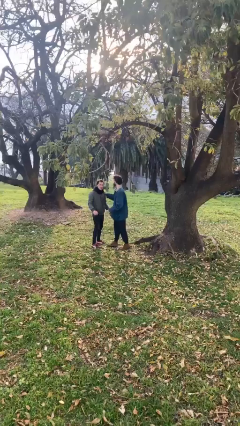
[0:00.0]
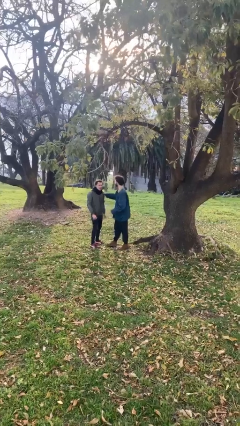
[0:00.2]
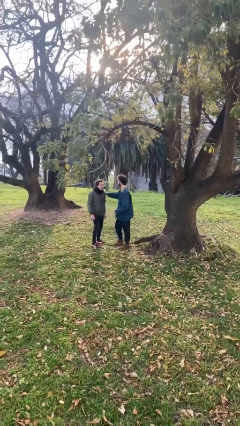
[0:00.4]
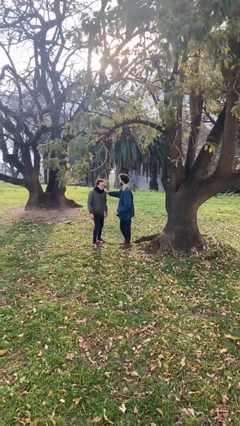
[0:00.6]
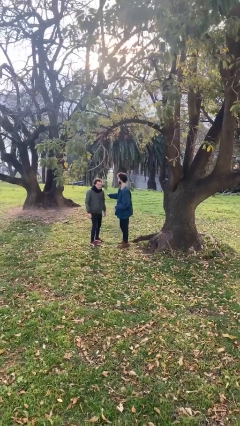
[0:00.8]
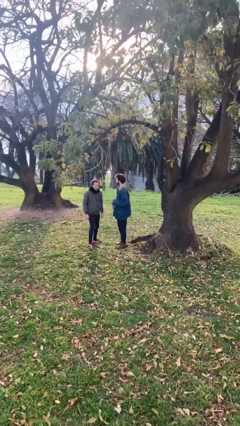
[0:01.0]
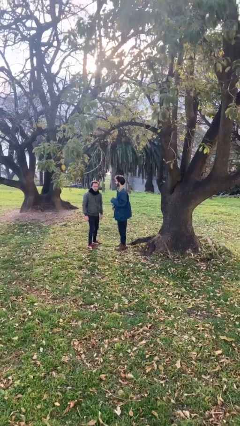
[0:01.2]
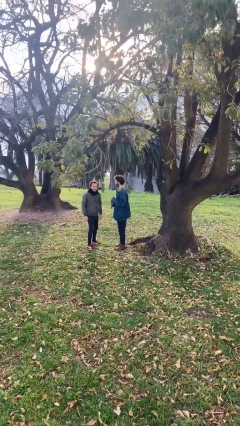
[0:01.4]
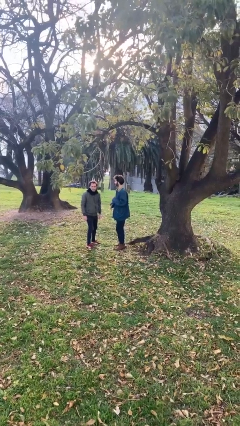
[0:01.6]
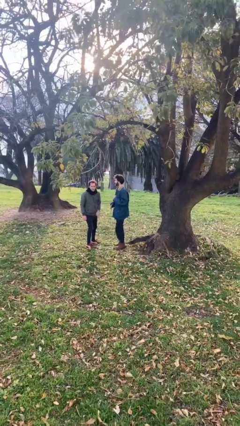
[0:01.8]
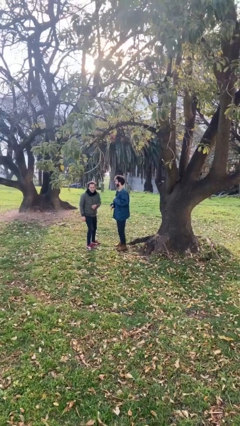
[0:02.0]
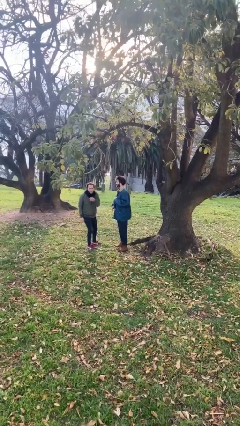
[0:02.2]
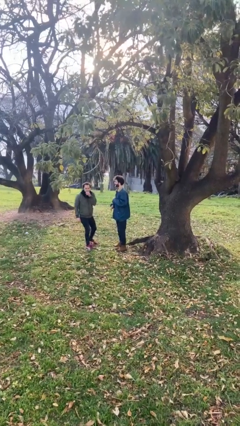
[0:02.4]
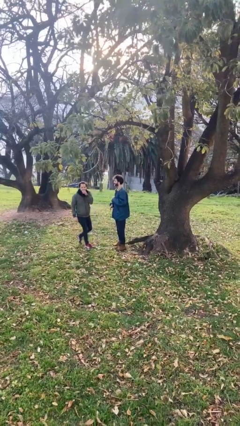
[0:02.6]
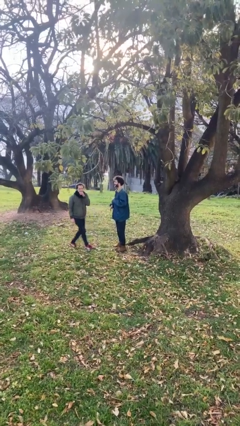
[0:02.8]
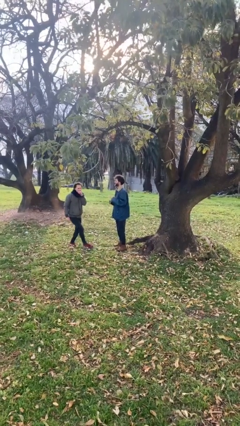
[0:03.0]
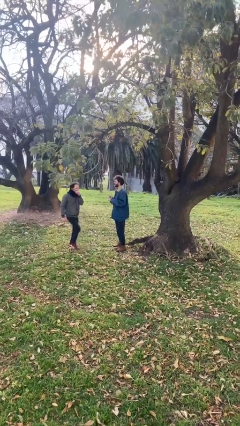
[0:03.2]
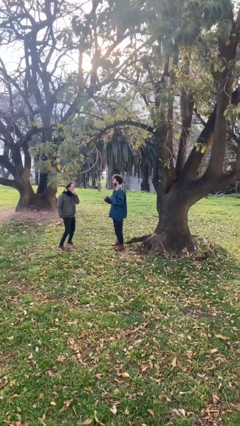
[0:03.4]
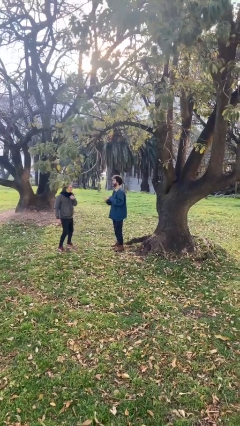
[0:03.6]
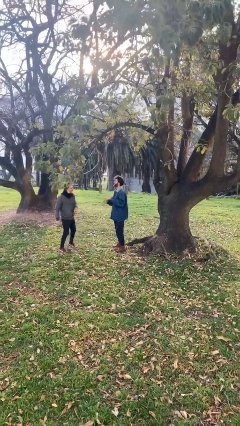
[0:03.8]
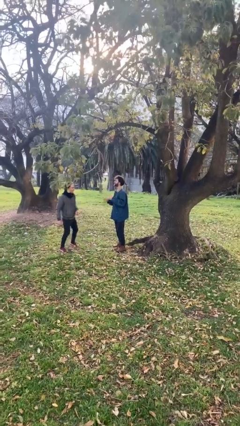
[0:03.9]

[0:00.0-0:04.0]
person talks to person

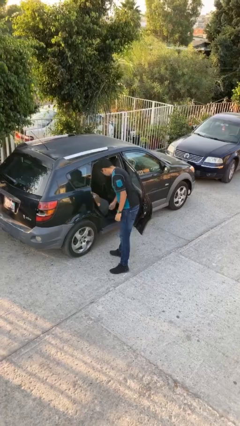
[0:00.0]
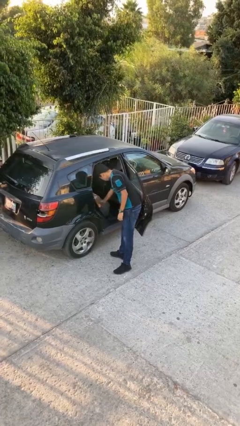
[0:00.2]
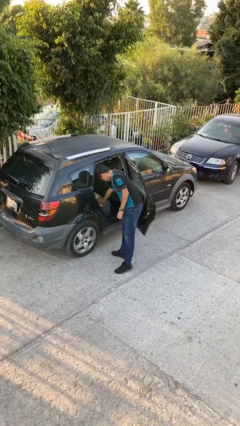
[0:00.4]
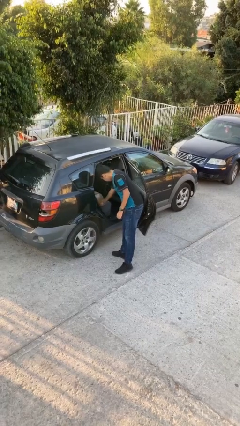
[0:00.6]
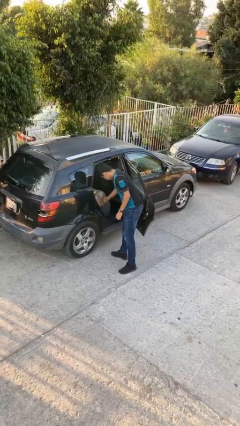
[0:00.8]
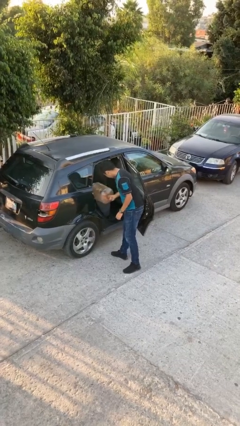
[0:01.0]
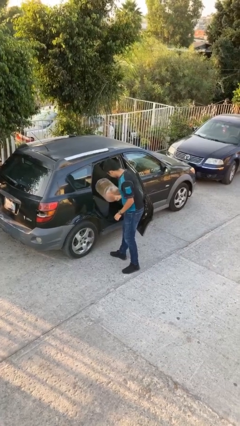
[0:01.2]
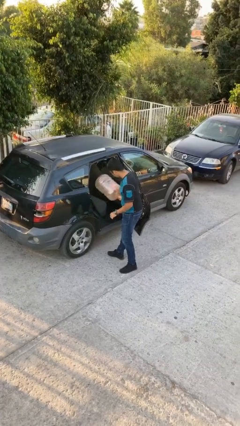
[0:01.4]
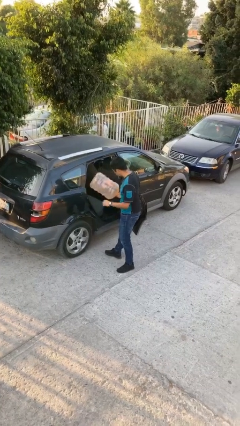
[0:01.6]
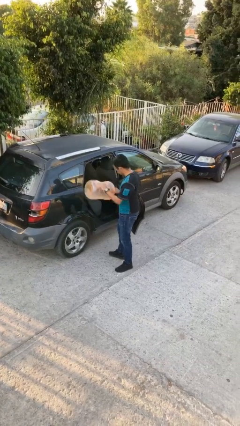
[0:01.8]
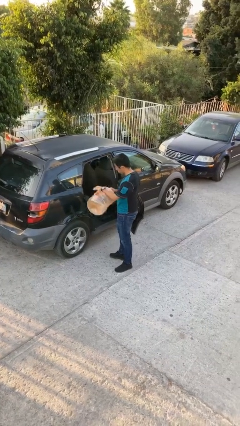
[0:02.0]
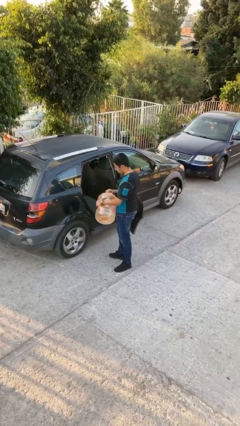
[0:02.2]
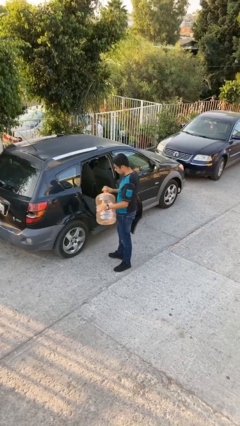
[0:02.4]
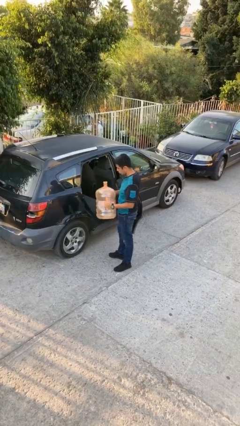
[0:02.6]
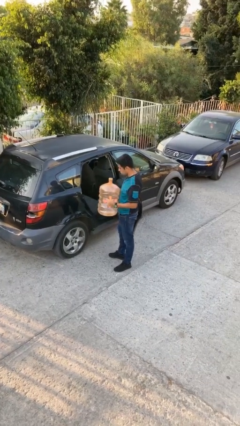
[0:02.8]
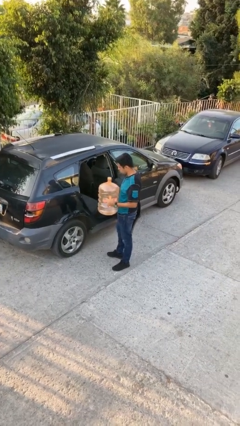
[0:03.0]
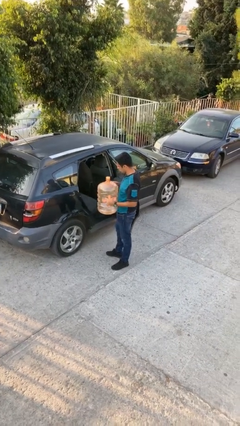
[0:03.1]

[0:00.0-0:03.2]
person unloads car

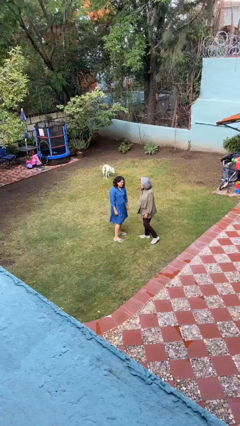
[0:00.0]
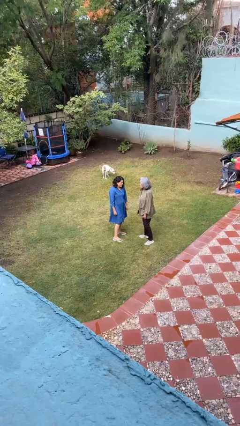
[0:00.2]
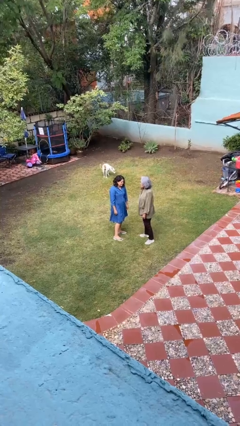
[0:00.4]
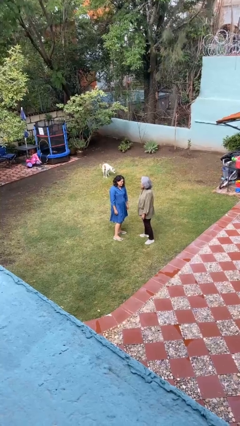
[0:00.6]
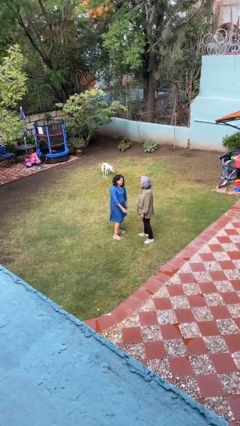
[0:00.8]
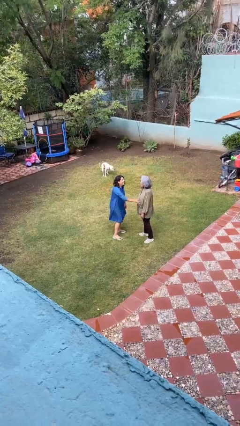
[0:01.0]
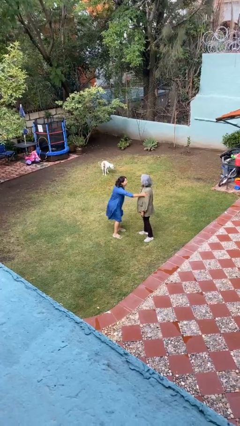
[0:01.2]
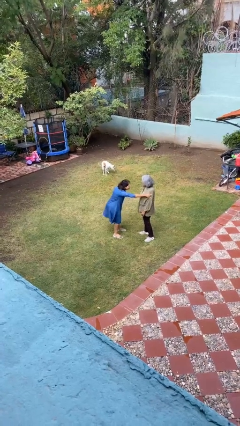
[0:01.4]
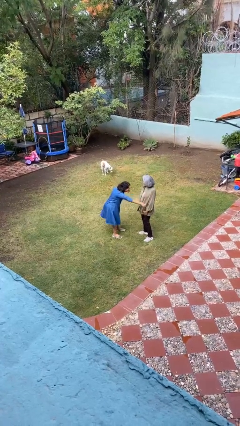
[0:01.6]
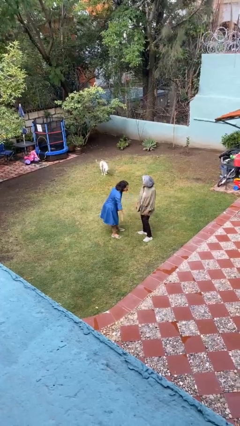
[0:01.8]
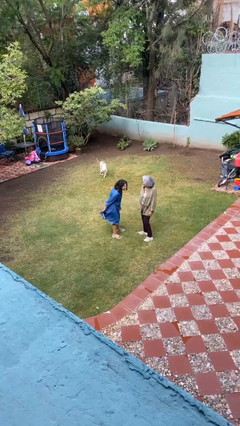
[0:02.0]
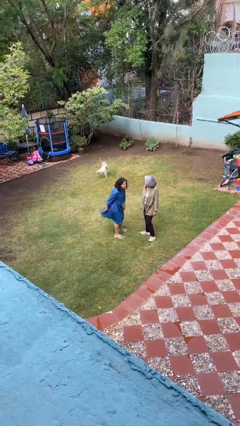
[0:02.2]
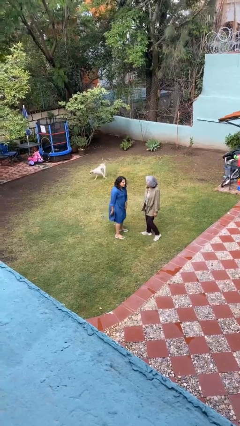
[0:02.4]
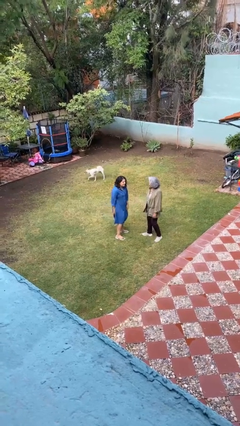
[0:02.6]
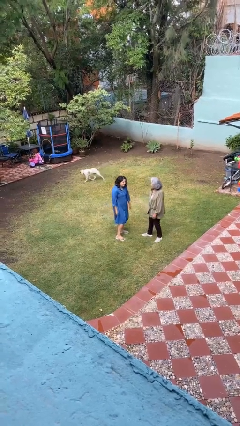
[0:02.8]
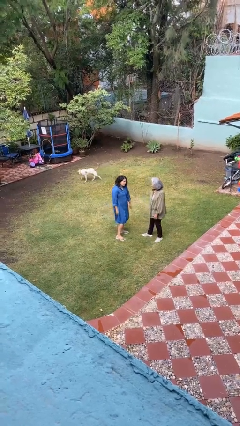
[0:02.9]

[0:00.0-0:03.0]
person shoves person

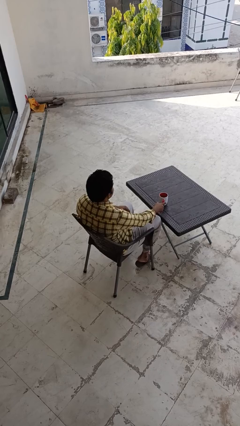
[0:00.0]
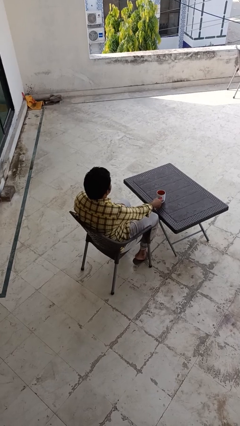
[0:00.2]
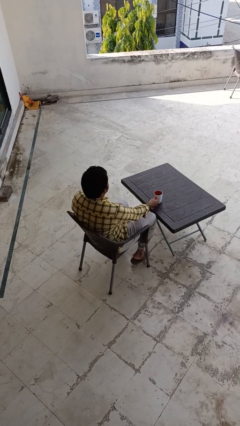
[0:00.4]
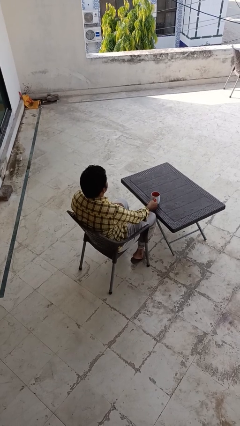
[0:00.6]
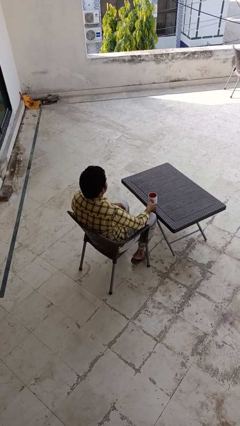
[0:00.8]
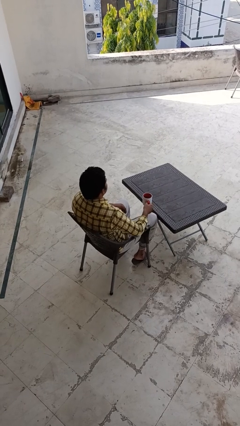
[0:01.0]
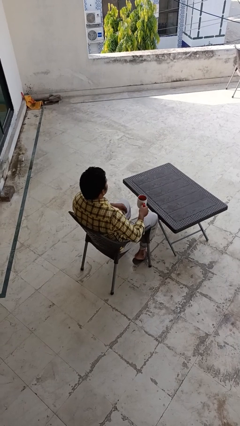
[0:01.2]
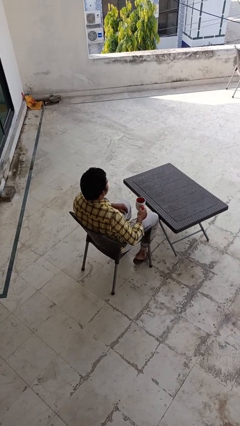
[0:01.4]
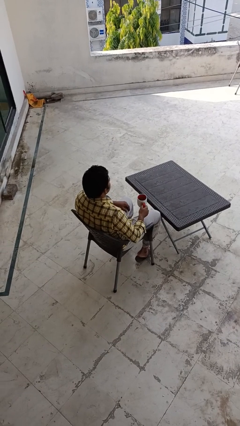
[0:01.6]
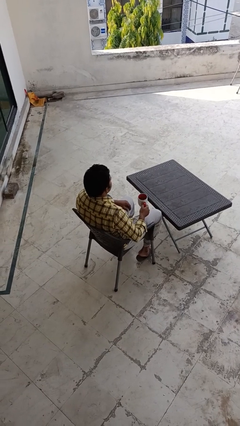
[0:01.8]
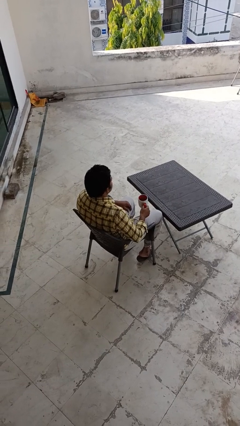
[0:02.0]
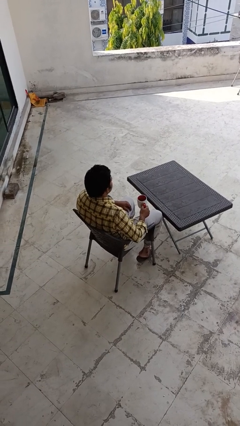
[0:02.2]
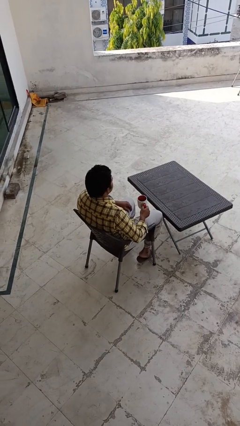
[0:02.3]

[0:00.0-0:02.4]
person picks up object from table

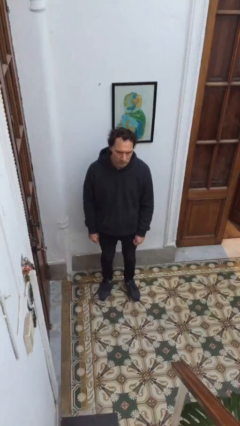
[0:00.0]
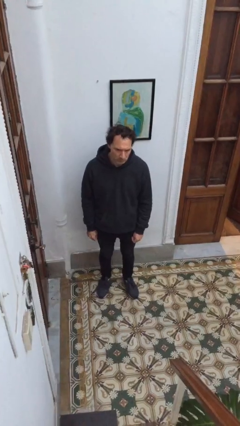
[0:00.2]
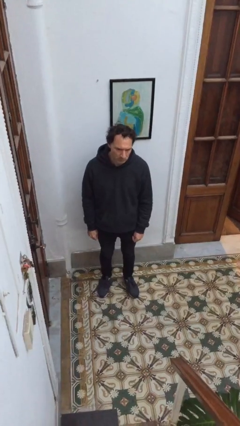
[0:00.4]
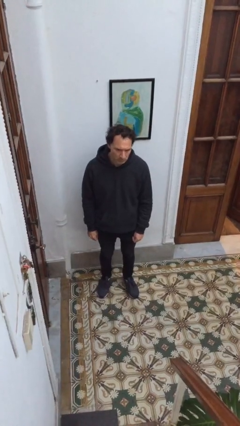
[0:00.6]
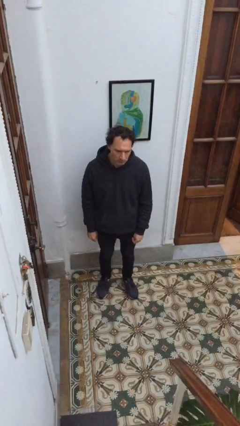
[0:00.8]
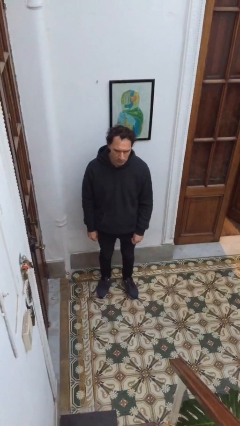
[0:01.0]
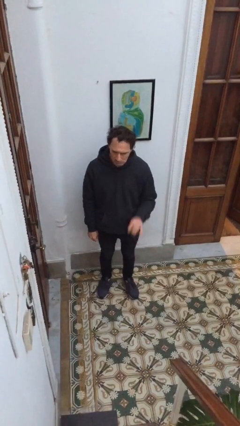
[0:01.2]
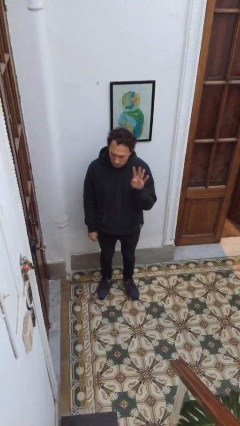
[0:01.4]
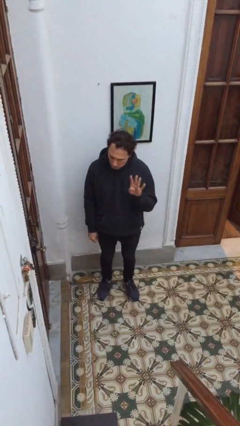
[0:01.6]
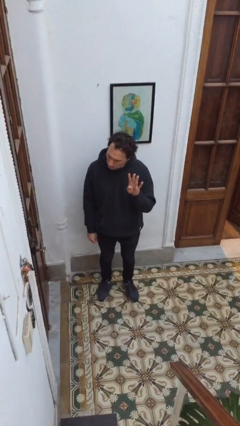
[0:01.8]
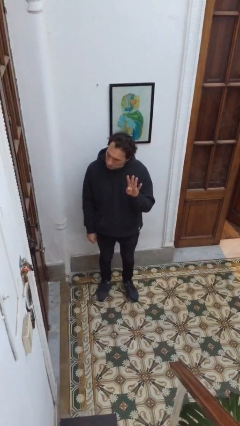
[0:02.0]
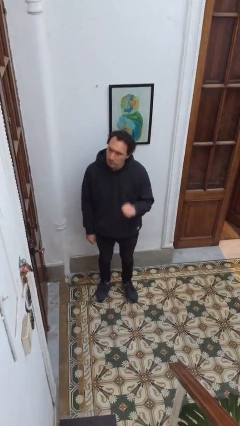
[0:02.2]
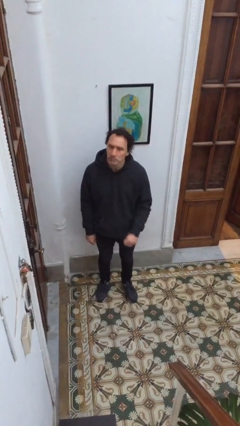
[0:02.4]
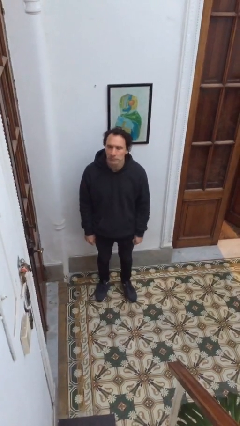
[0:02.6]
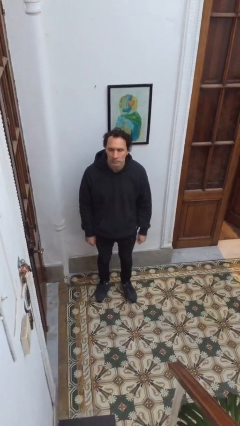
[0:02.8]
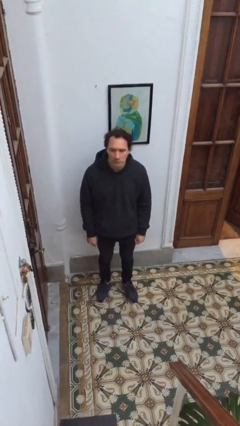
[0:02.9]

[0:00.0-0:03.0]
person gestures number four

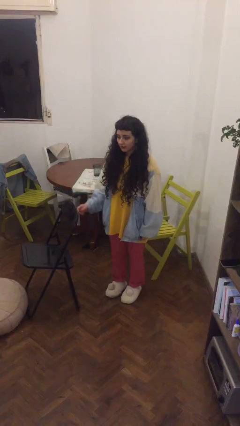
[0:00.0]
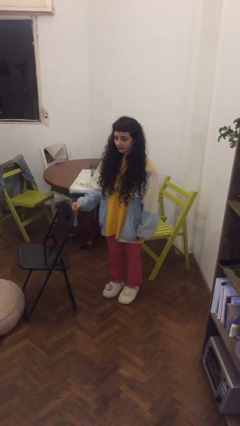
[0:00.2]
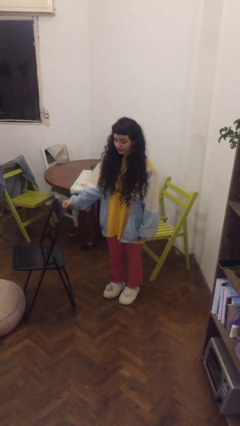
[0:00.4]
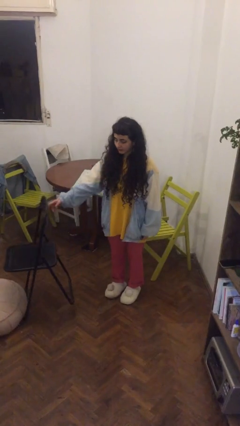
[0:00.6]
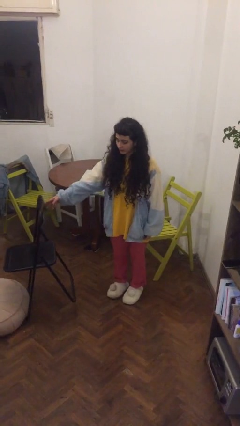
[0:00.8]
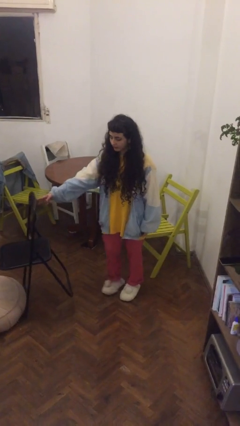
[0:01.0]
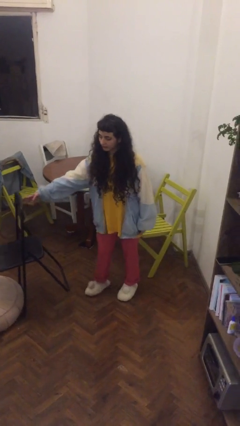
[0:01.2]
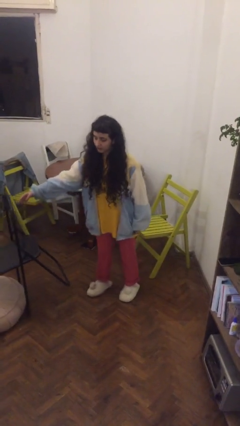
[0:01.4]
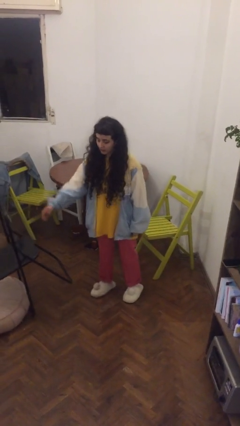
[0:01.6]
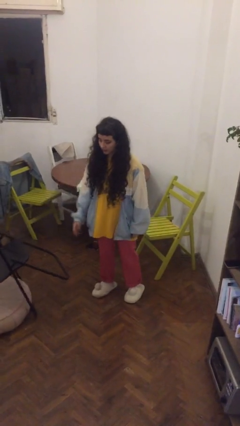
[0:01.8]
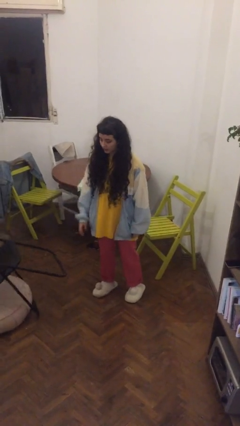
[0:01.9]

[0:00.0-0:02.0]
person knocks over furniture
